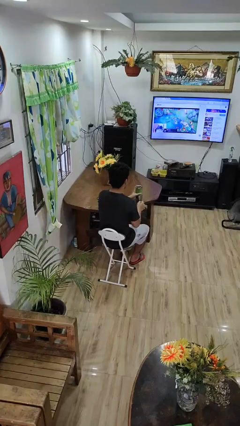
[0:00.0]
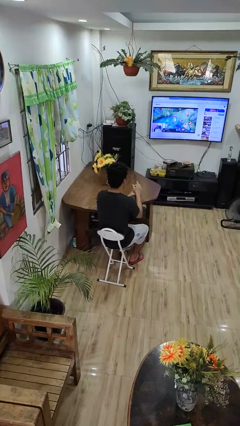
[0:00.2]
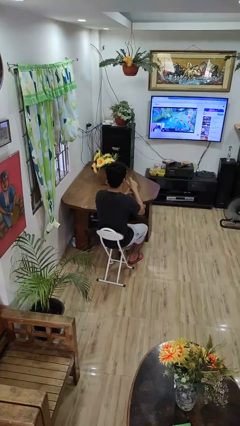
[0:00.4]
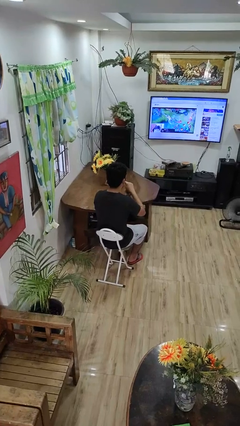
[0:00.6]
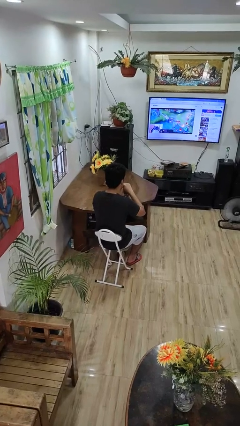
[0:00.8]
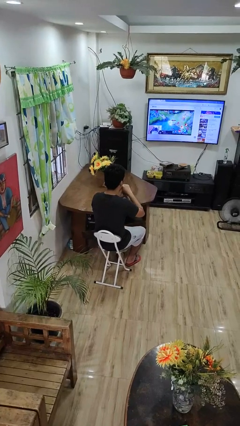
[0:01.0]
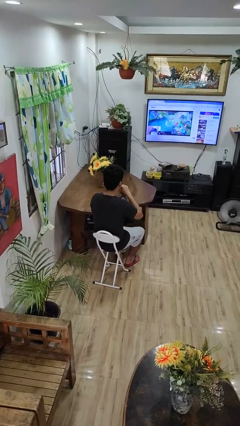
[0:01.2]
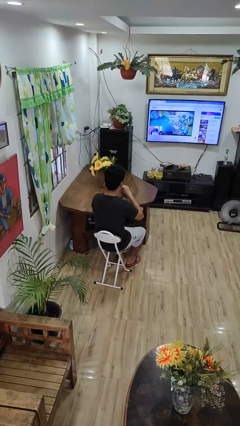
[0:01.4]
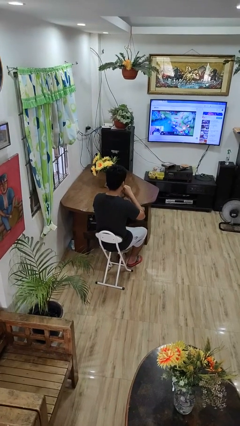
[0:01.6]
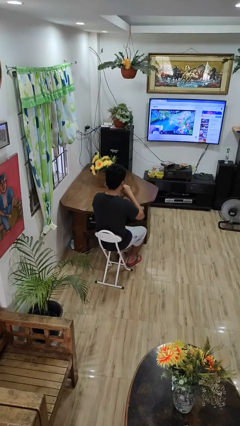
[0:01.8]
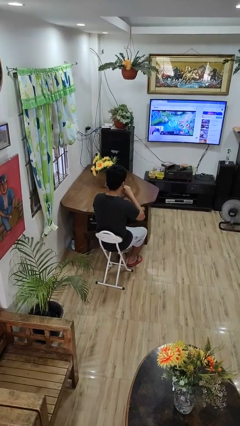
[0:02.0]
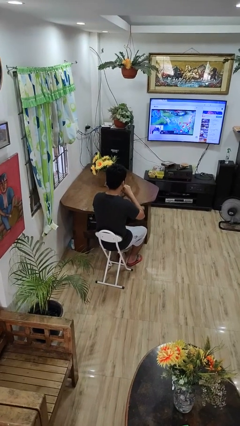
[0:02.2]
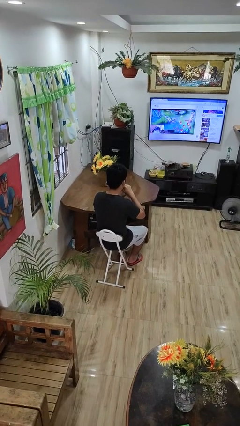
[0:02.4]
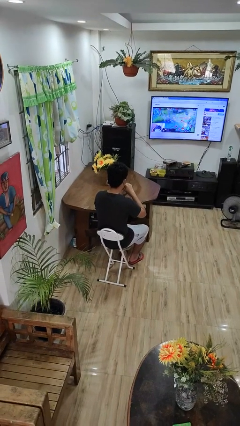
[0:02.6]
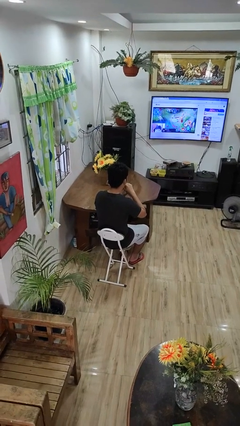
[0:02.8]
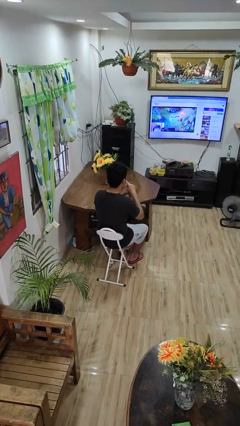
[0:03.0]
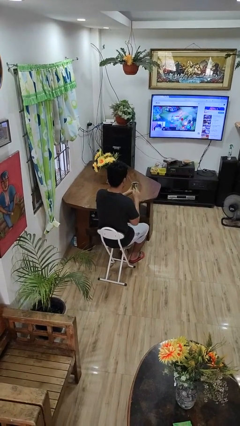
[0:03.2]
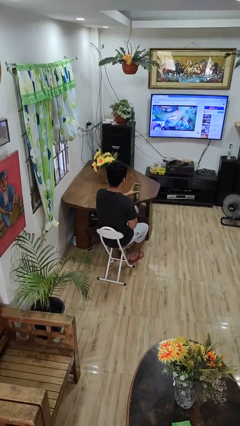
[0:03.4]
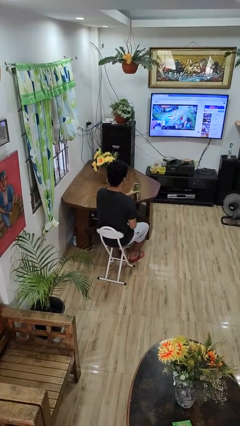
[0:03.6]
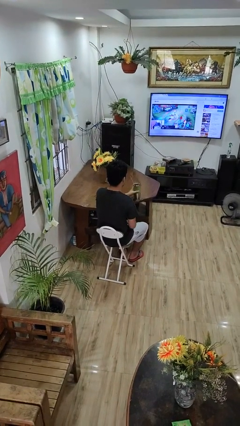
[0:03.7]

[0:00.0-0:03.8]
person drinks from straw

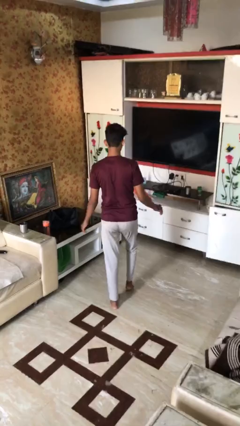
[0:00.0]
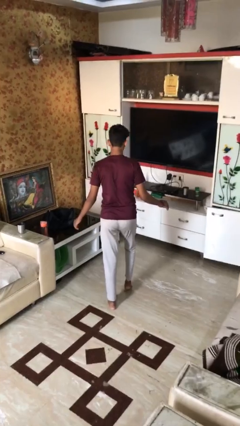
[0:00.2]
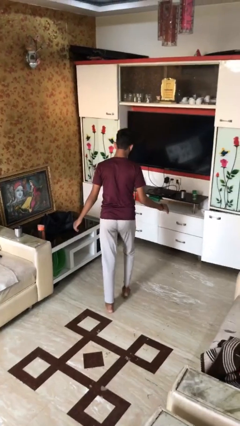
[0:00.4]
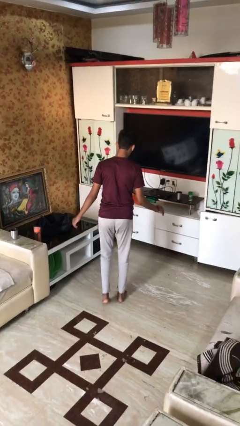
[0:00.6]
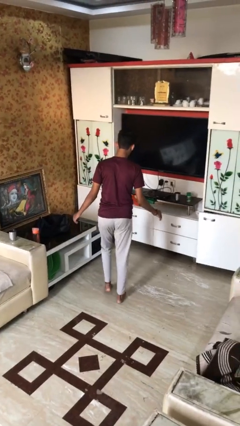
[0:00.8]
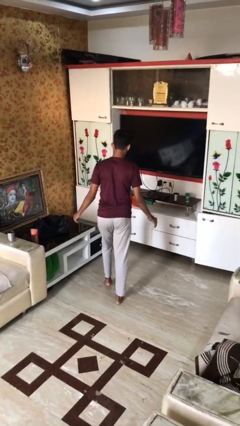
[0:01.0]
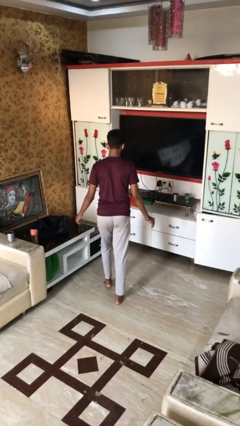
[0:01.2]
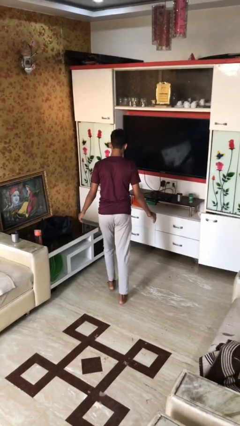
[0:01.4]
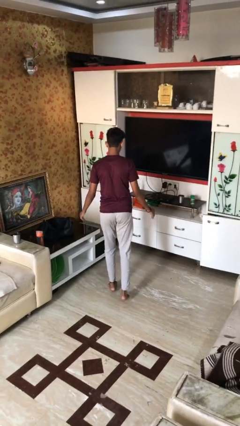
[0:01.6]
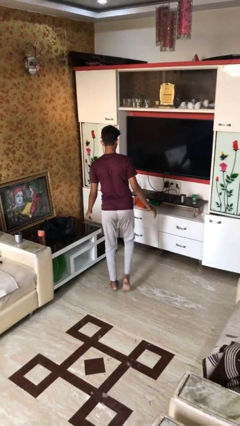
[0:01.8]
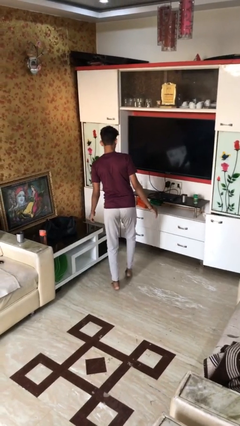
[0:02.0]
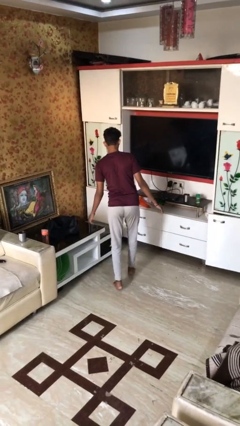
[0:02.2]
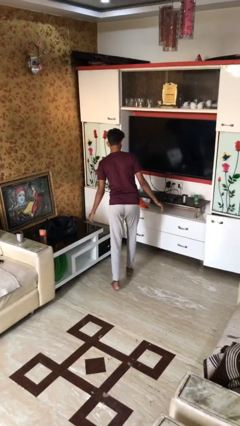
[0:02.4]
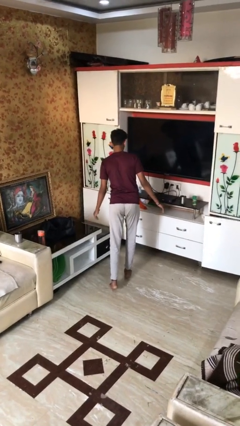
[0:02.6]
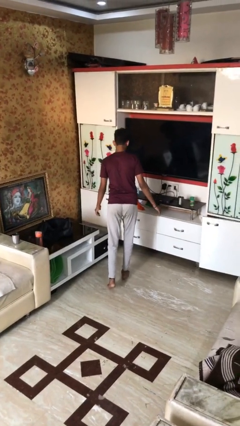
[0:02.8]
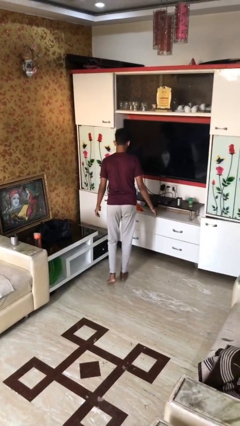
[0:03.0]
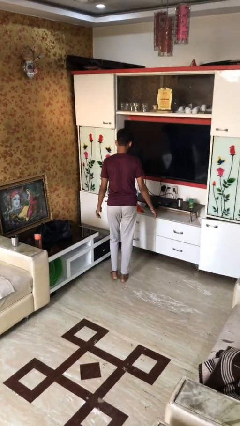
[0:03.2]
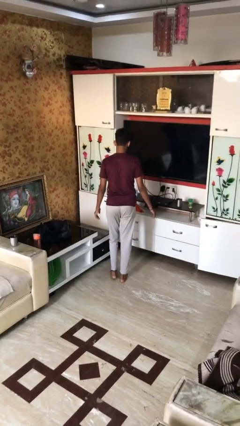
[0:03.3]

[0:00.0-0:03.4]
person walks tiptoe

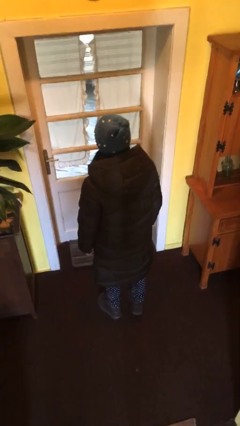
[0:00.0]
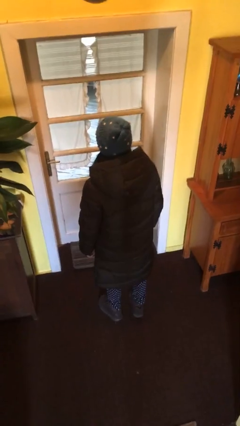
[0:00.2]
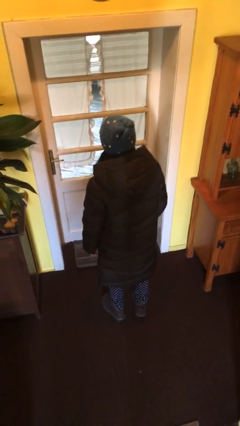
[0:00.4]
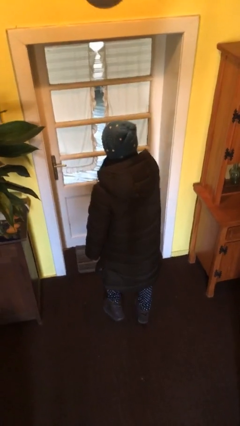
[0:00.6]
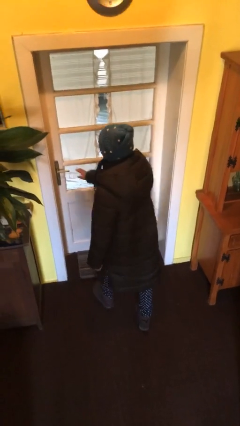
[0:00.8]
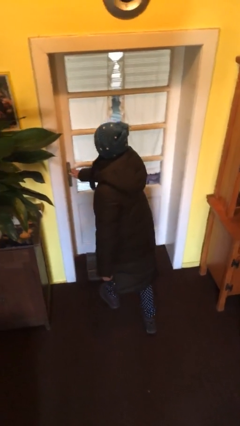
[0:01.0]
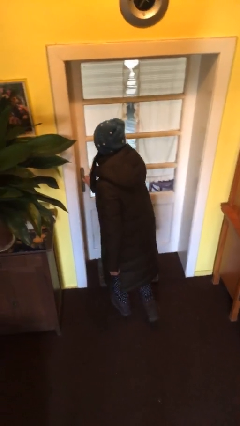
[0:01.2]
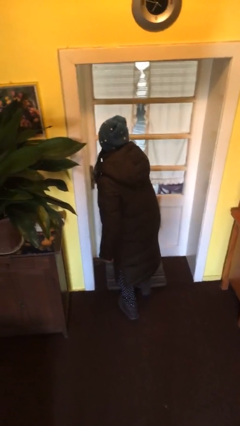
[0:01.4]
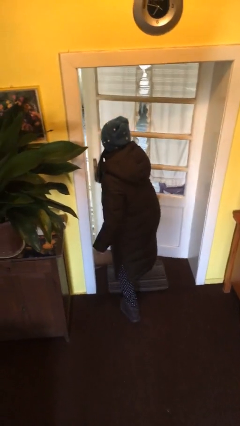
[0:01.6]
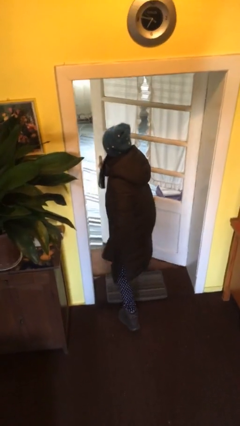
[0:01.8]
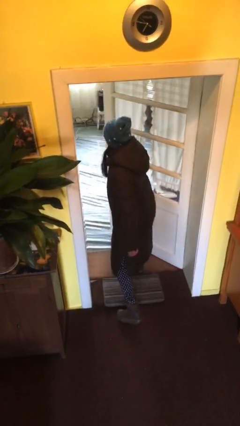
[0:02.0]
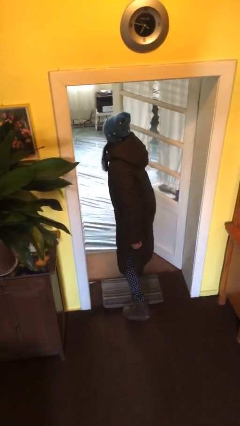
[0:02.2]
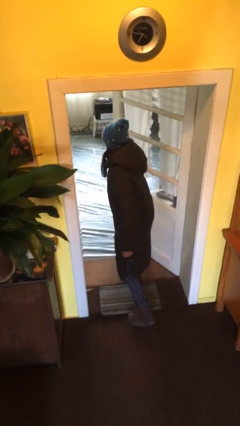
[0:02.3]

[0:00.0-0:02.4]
person opens facility door

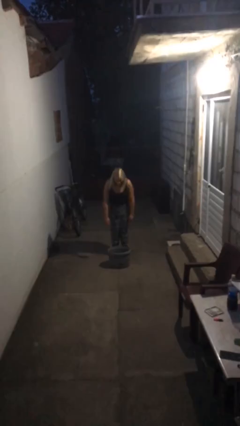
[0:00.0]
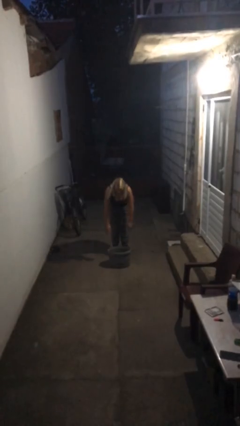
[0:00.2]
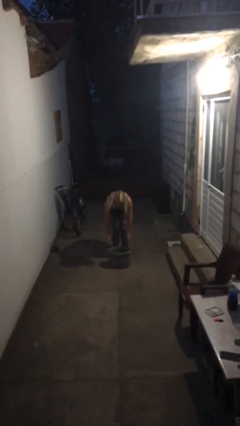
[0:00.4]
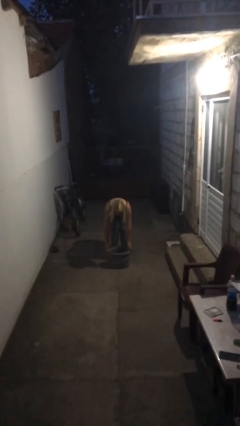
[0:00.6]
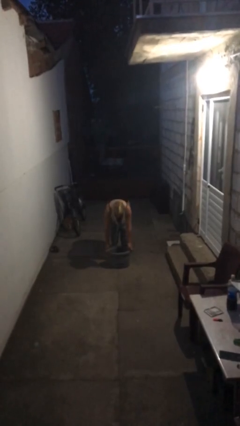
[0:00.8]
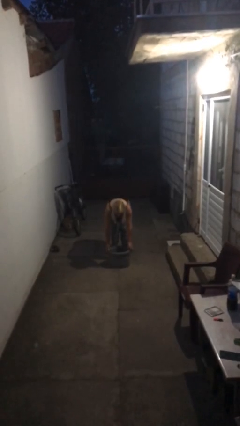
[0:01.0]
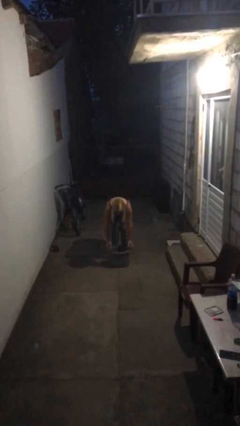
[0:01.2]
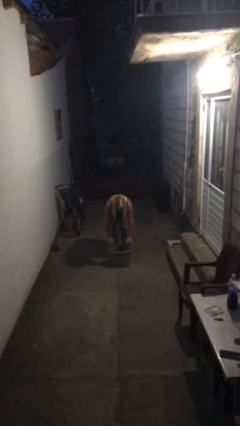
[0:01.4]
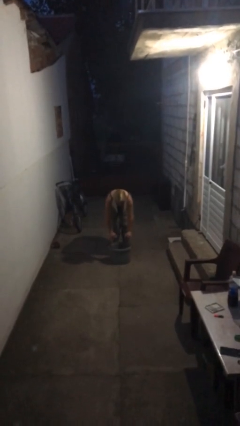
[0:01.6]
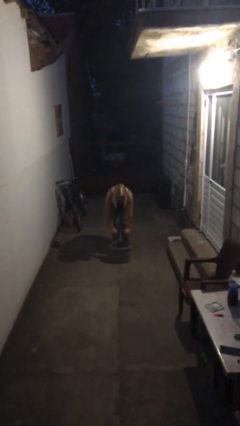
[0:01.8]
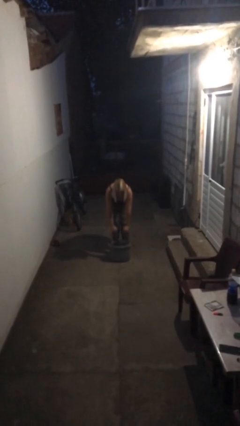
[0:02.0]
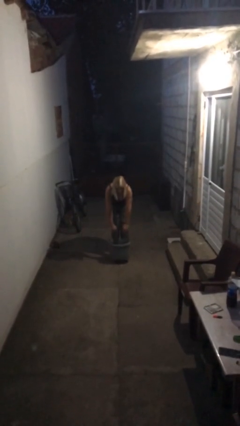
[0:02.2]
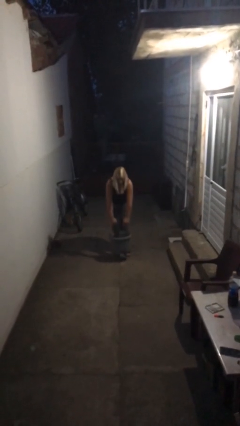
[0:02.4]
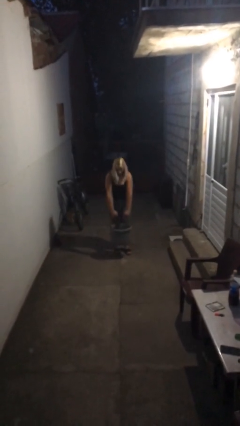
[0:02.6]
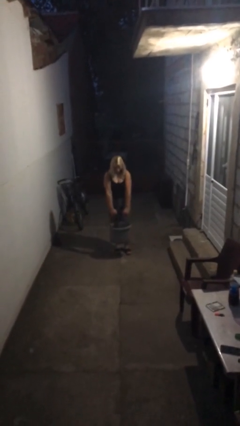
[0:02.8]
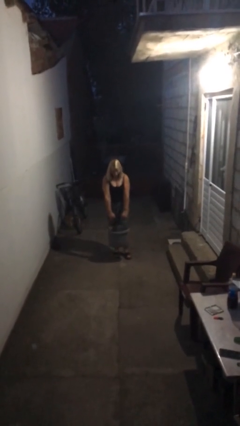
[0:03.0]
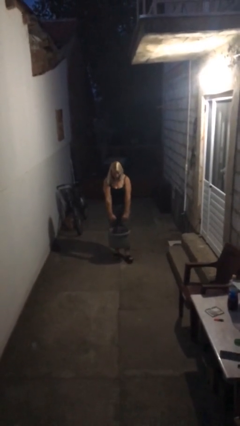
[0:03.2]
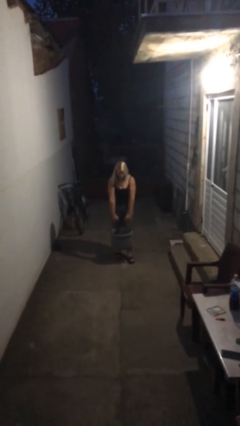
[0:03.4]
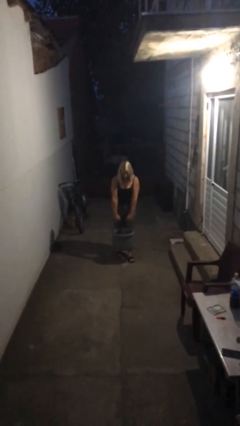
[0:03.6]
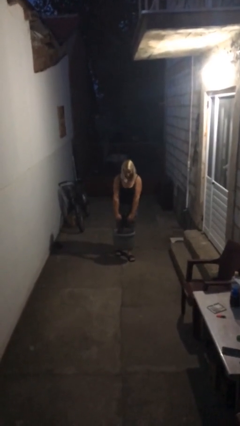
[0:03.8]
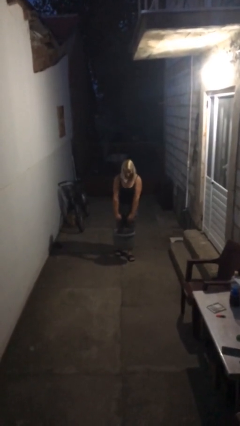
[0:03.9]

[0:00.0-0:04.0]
person picks up object from floor

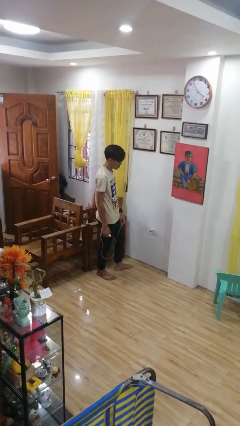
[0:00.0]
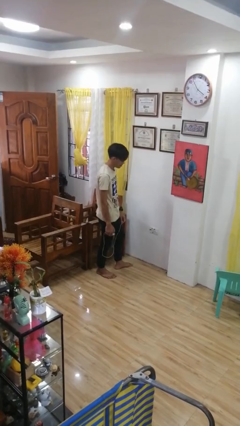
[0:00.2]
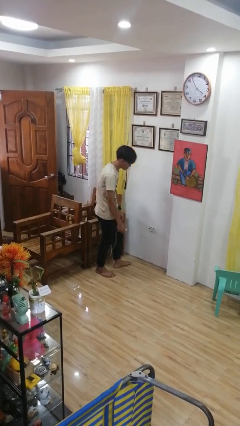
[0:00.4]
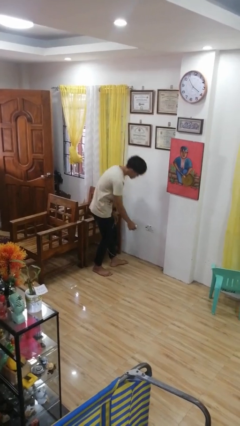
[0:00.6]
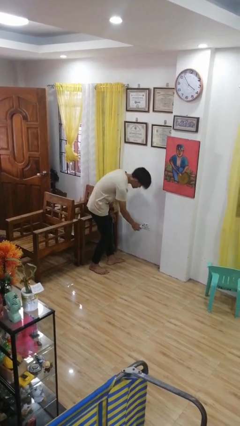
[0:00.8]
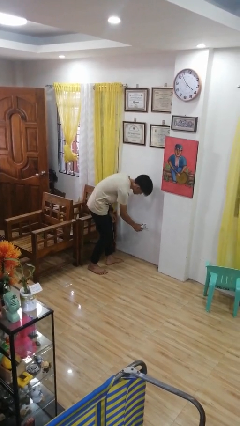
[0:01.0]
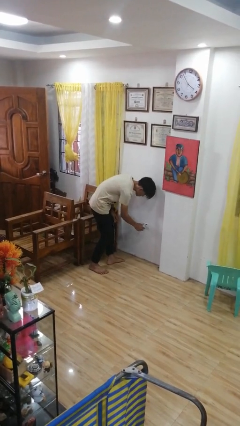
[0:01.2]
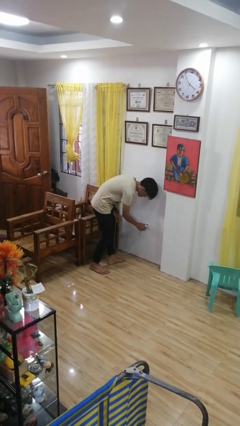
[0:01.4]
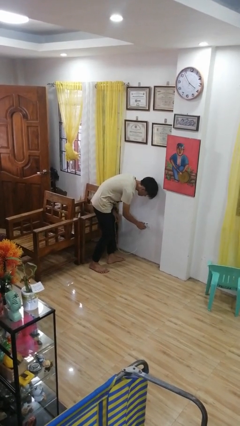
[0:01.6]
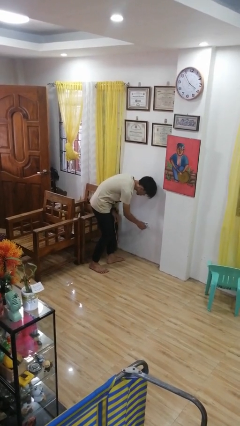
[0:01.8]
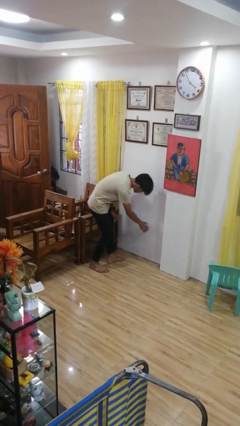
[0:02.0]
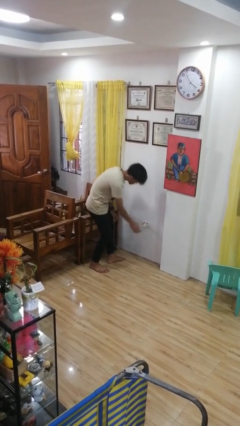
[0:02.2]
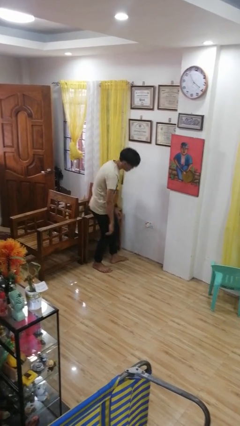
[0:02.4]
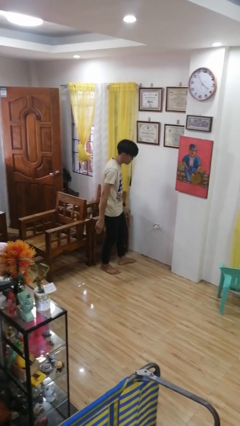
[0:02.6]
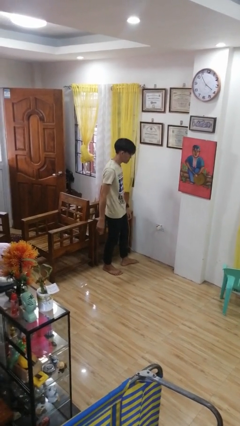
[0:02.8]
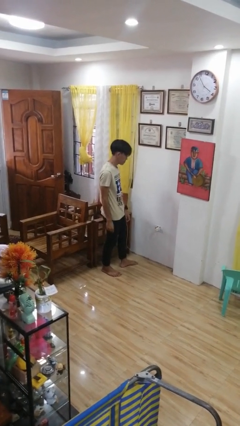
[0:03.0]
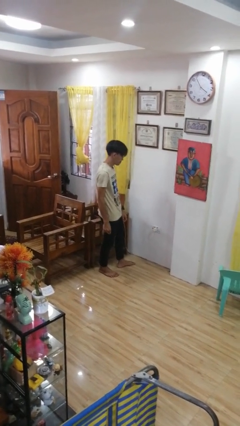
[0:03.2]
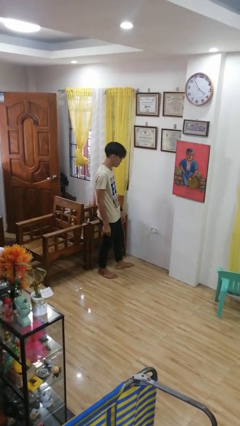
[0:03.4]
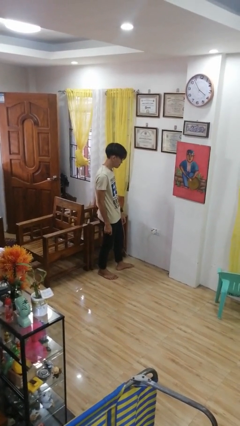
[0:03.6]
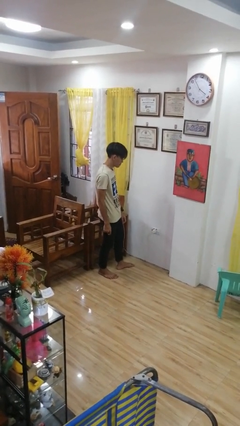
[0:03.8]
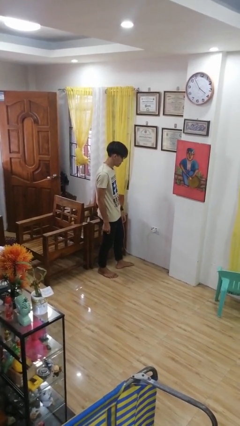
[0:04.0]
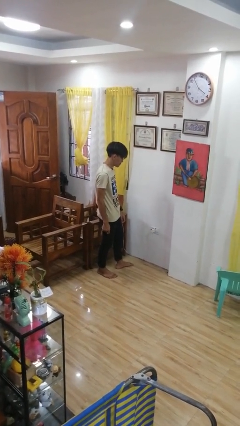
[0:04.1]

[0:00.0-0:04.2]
person plugs into electrical socket
